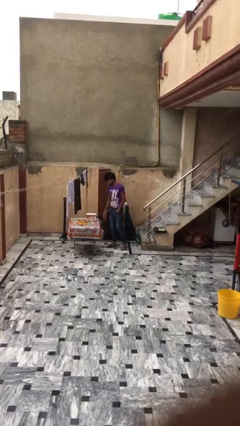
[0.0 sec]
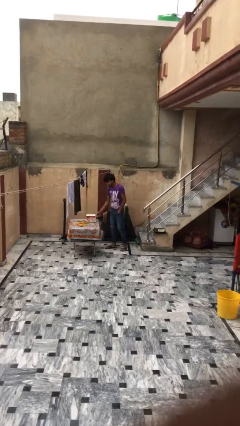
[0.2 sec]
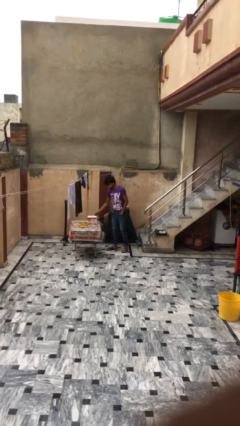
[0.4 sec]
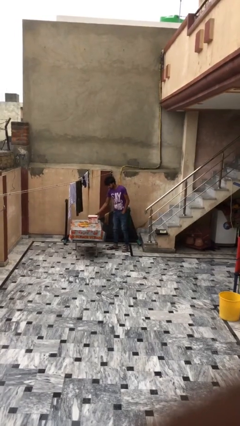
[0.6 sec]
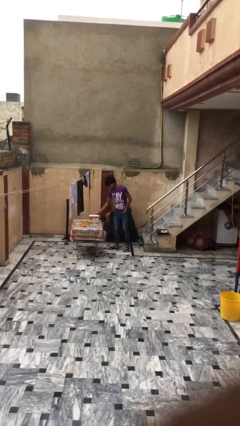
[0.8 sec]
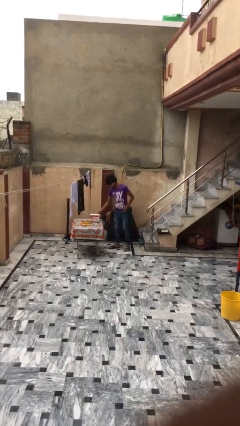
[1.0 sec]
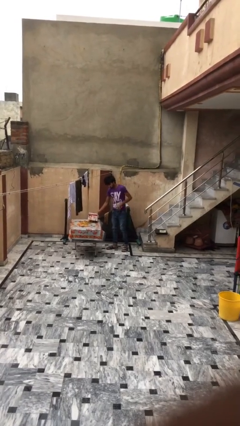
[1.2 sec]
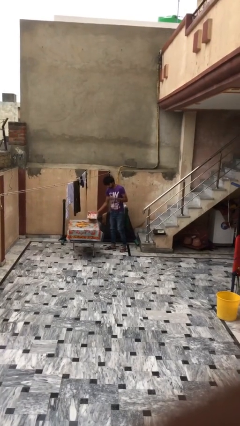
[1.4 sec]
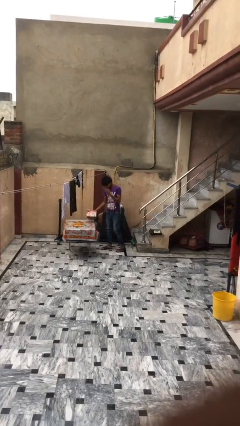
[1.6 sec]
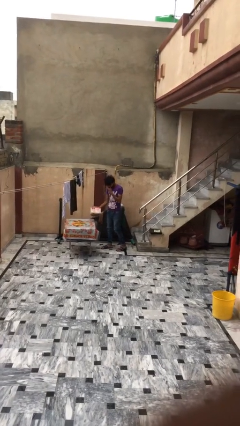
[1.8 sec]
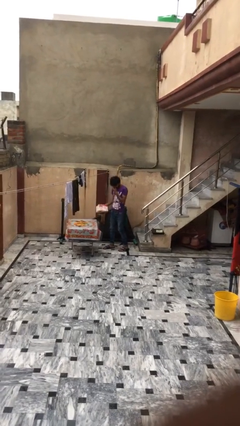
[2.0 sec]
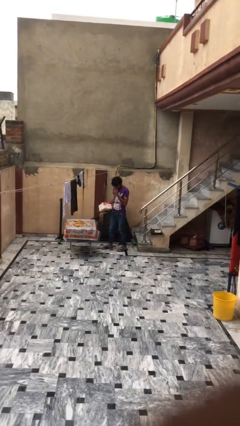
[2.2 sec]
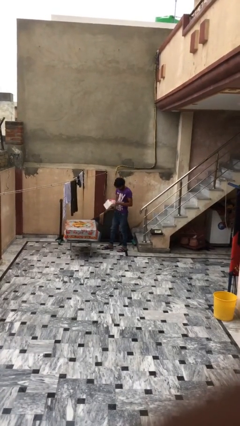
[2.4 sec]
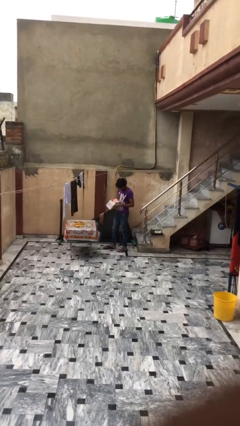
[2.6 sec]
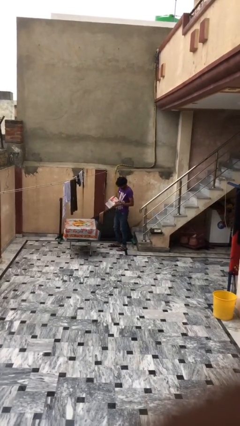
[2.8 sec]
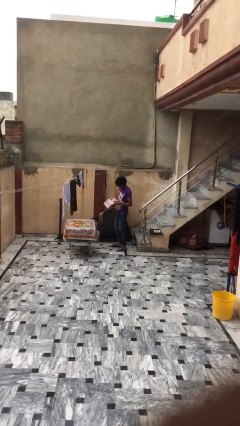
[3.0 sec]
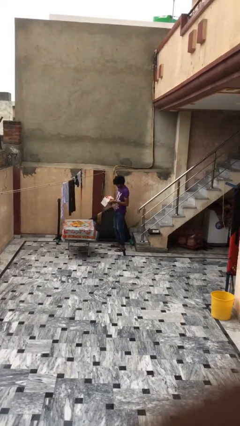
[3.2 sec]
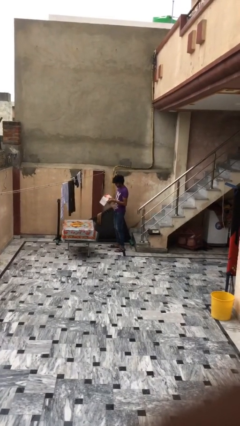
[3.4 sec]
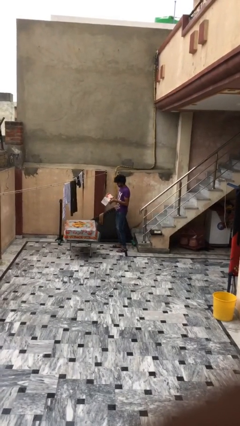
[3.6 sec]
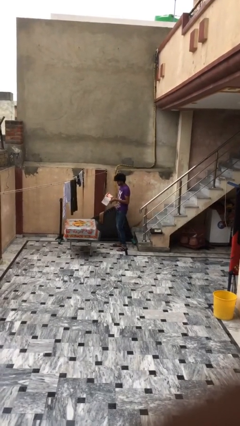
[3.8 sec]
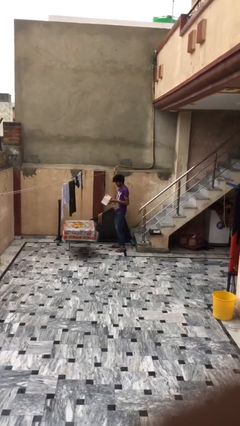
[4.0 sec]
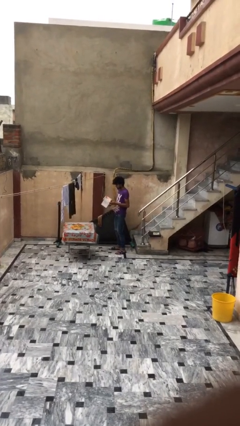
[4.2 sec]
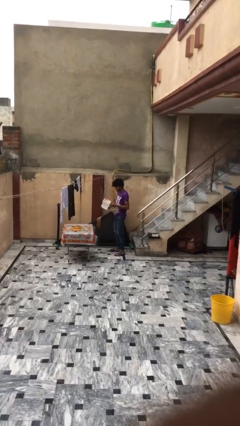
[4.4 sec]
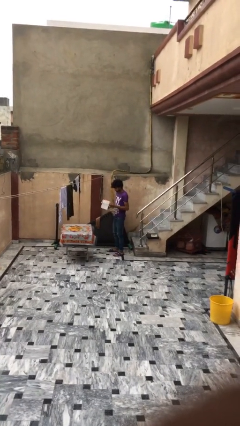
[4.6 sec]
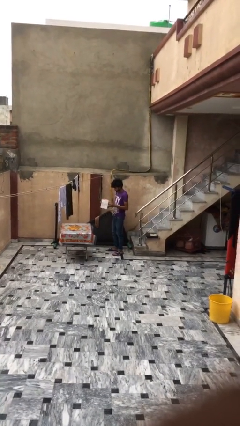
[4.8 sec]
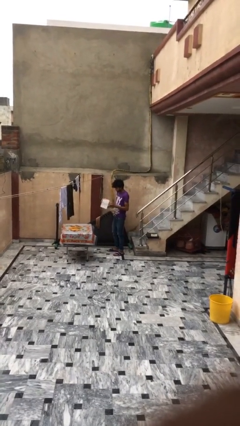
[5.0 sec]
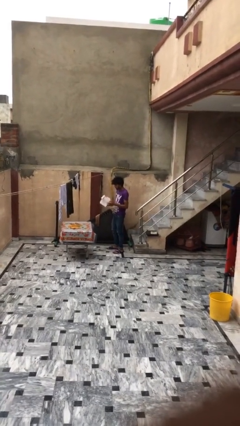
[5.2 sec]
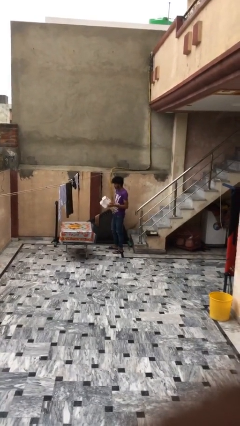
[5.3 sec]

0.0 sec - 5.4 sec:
person picks up object from table

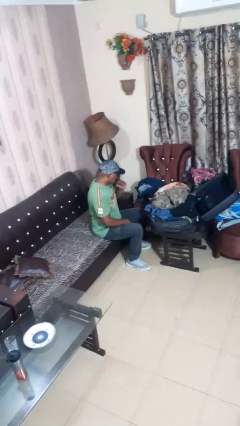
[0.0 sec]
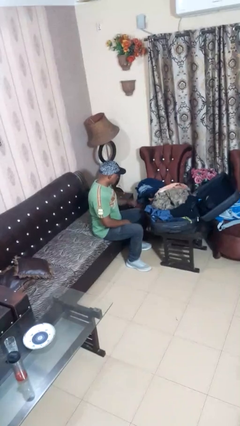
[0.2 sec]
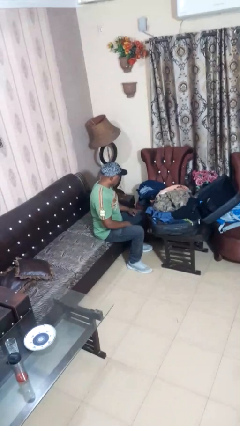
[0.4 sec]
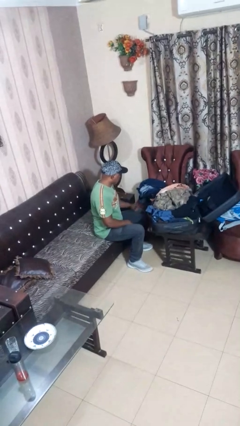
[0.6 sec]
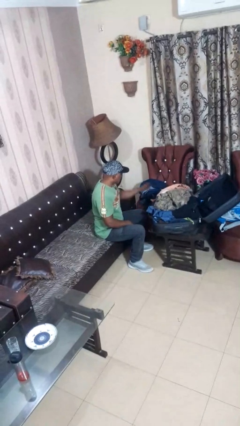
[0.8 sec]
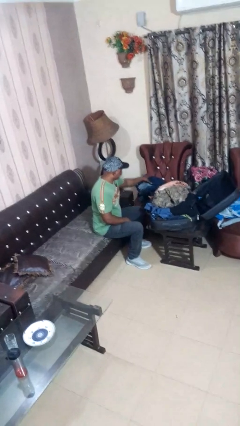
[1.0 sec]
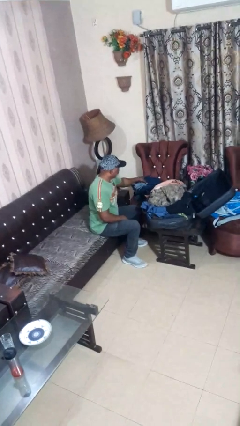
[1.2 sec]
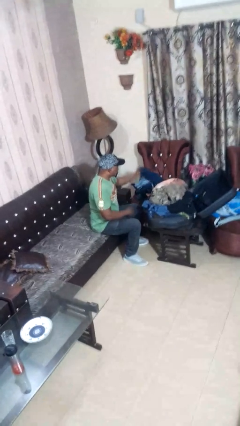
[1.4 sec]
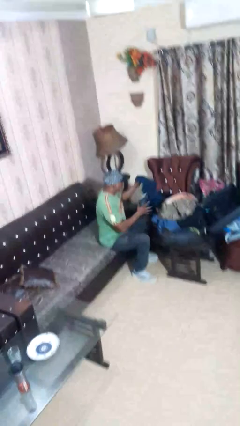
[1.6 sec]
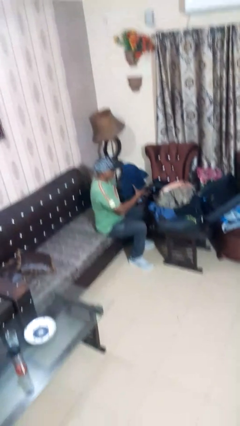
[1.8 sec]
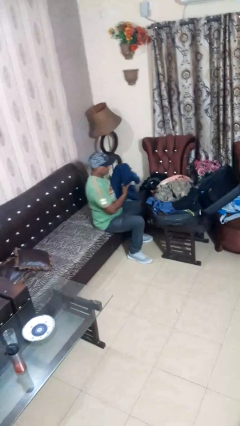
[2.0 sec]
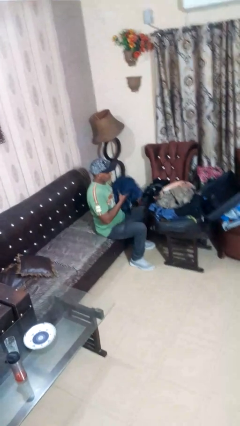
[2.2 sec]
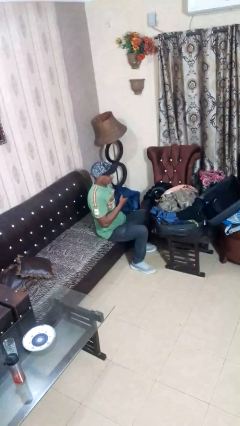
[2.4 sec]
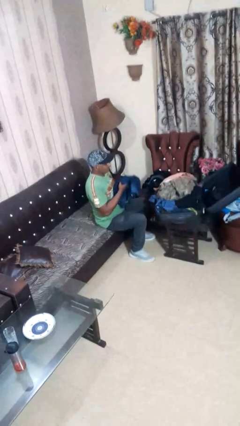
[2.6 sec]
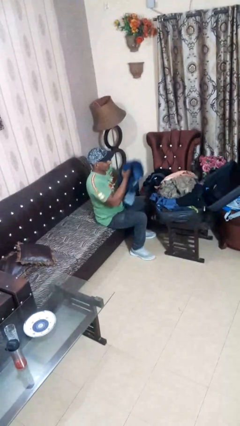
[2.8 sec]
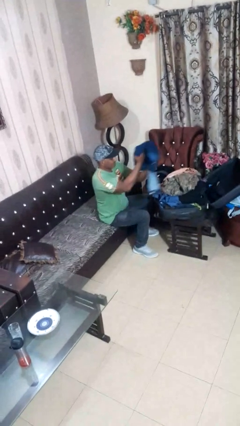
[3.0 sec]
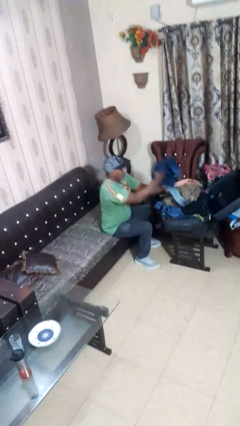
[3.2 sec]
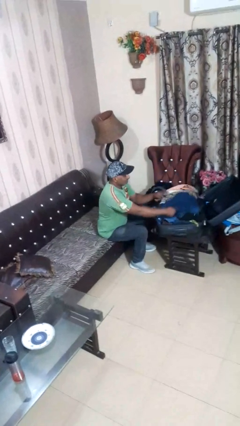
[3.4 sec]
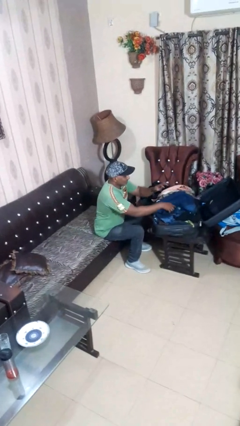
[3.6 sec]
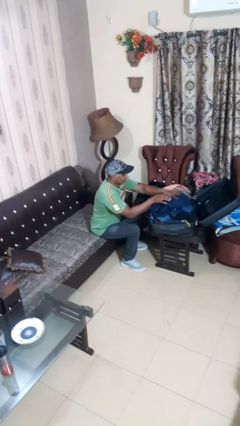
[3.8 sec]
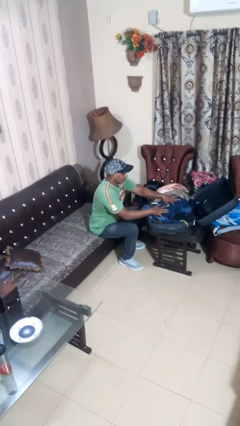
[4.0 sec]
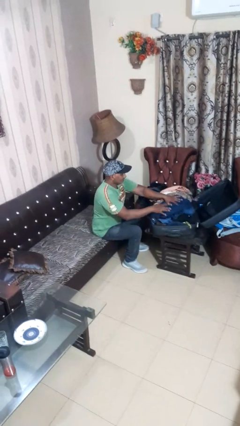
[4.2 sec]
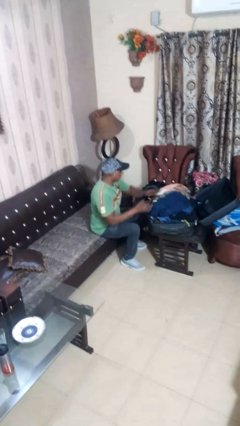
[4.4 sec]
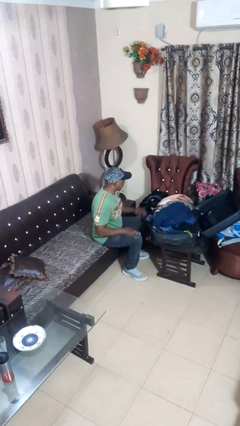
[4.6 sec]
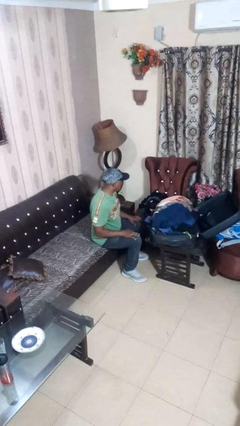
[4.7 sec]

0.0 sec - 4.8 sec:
person loads clothes into suitcase

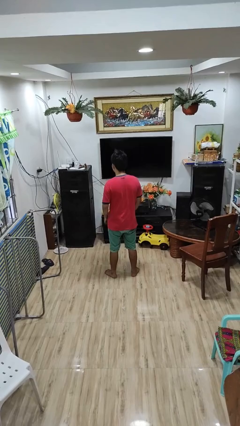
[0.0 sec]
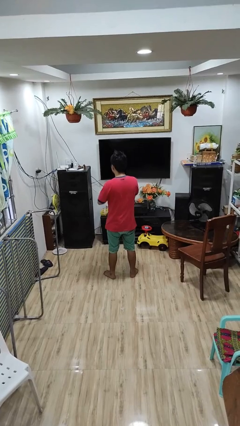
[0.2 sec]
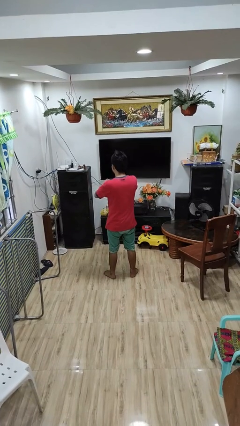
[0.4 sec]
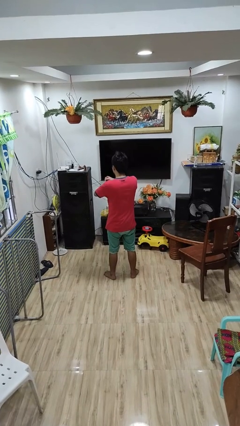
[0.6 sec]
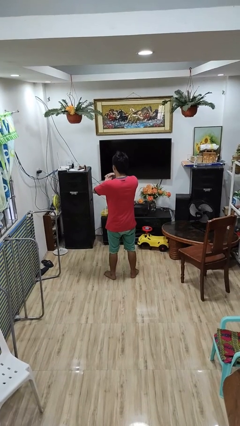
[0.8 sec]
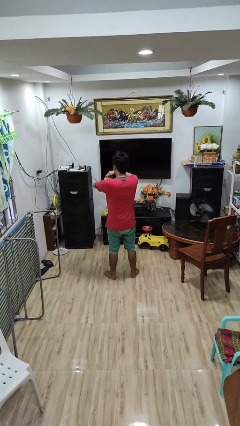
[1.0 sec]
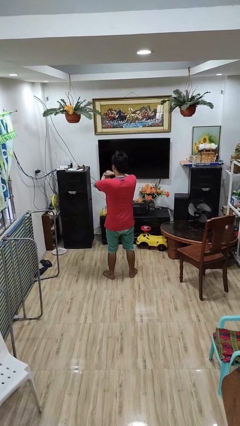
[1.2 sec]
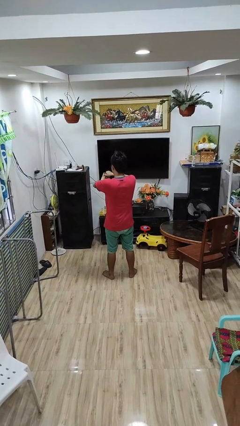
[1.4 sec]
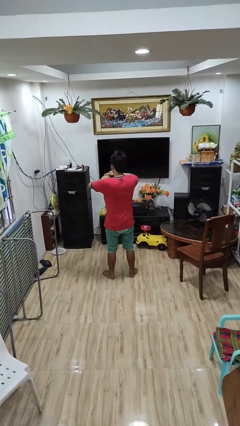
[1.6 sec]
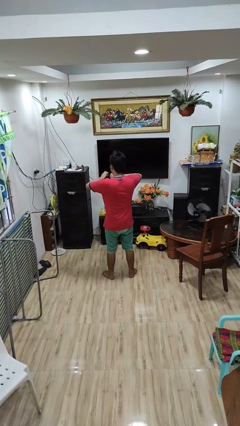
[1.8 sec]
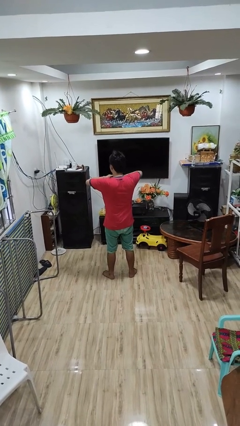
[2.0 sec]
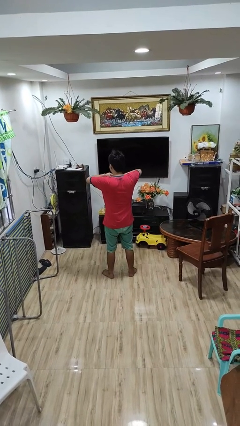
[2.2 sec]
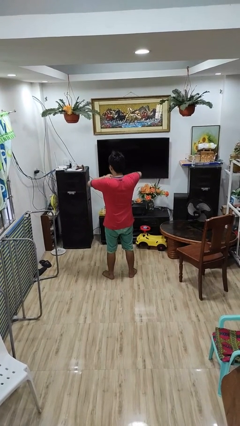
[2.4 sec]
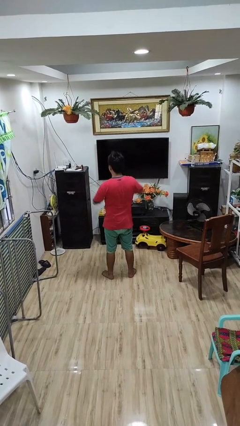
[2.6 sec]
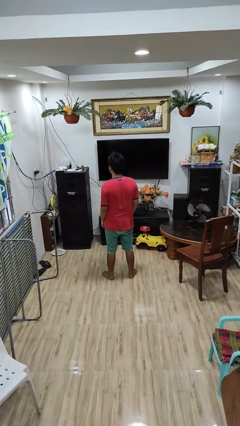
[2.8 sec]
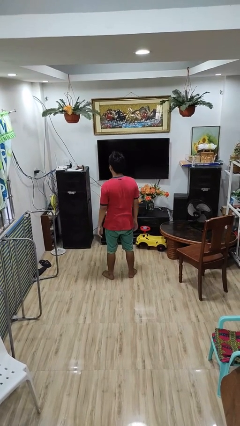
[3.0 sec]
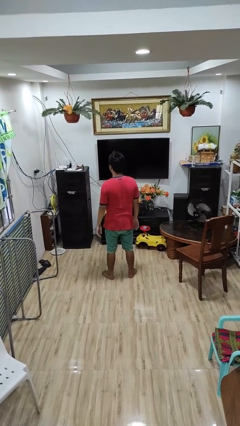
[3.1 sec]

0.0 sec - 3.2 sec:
person cracks knuckles

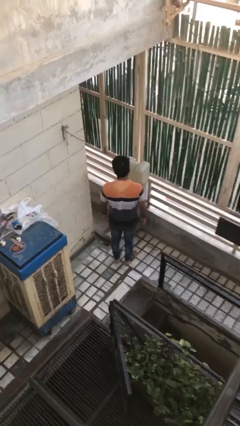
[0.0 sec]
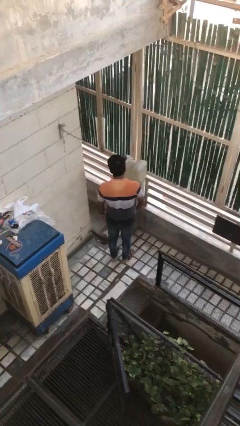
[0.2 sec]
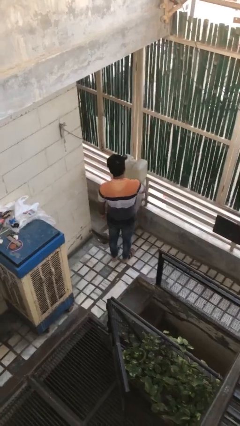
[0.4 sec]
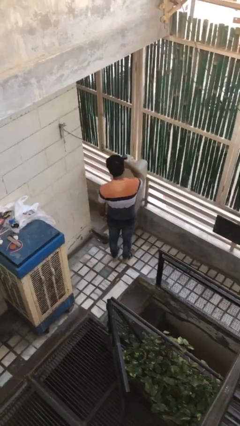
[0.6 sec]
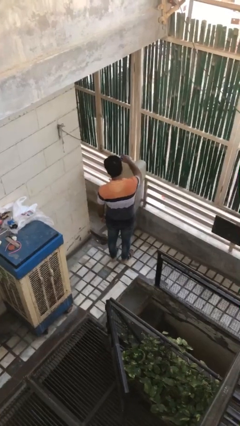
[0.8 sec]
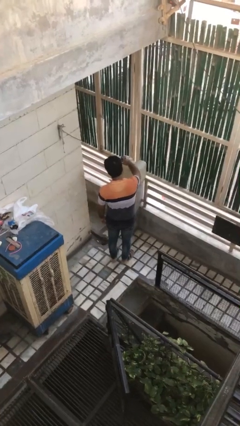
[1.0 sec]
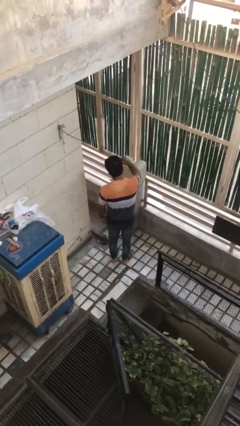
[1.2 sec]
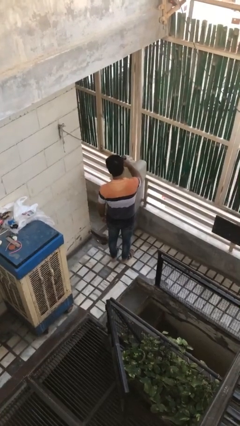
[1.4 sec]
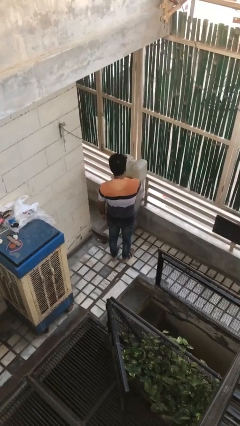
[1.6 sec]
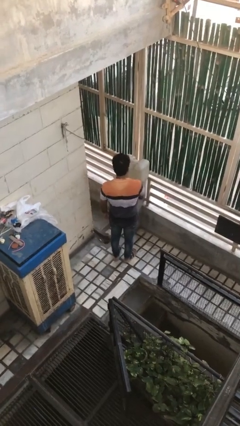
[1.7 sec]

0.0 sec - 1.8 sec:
person taps object with finger

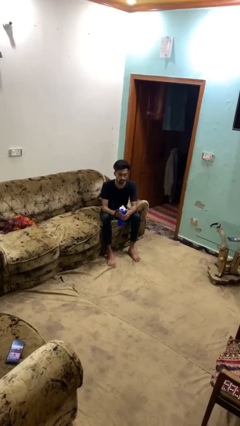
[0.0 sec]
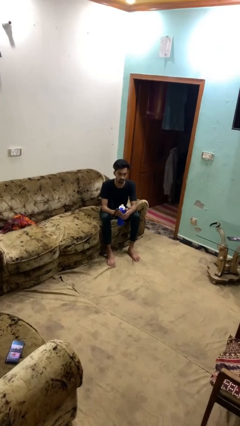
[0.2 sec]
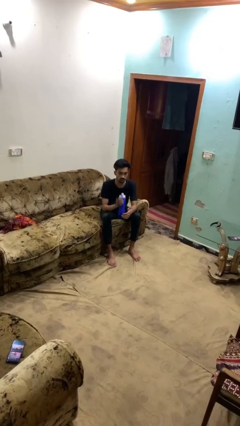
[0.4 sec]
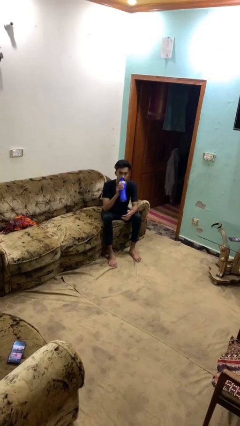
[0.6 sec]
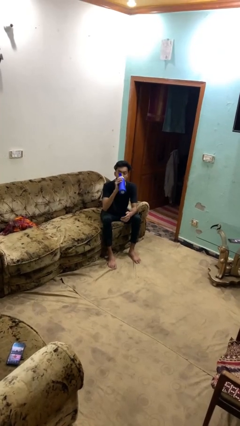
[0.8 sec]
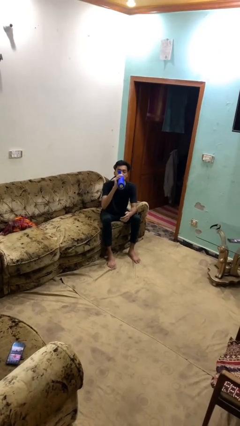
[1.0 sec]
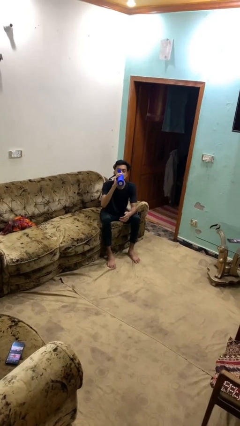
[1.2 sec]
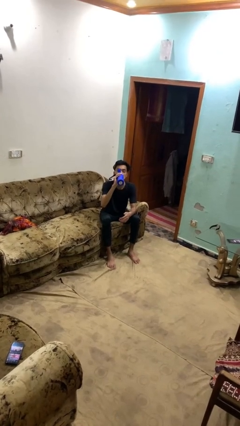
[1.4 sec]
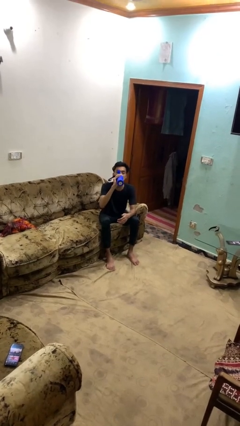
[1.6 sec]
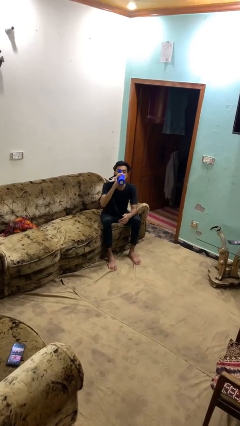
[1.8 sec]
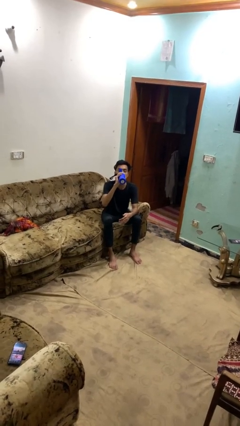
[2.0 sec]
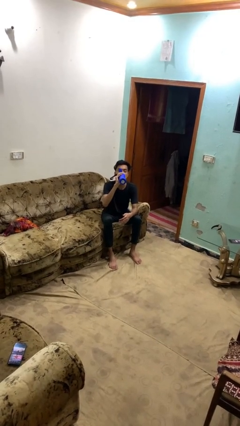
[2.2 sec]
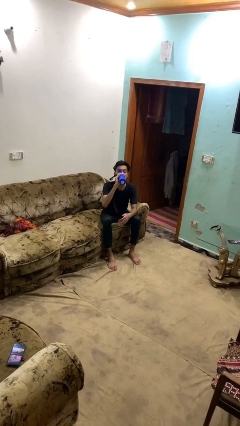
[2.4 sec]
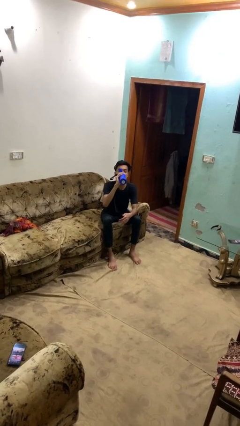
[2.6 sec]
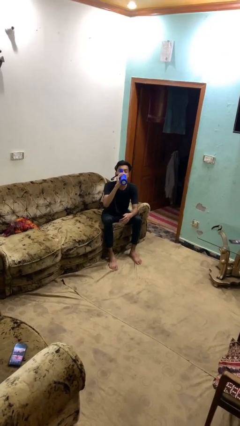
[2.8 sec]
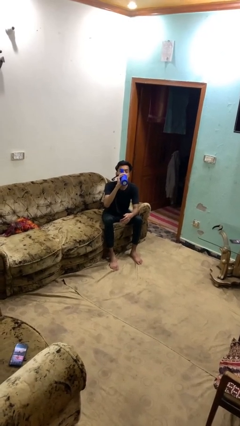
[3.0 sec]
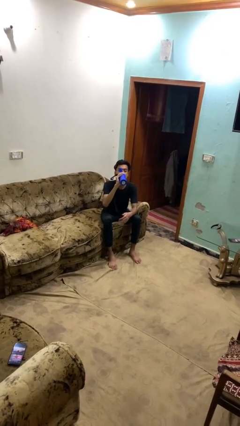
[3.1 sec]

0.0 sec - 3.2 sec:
person drinks from bottle
